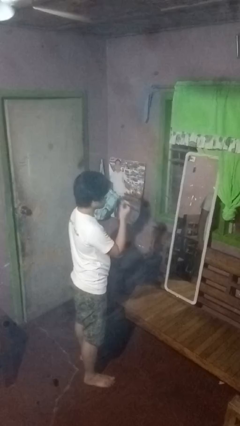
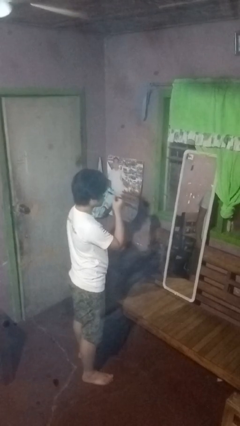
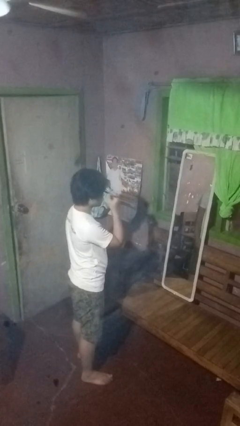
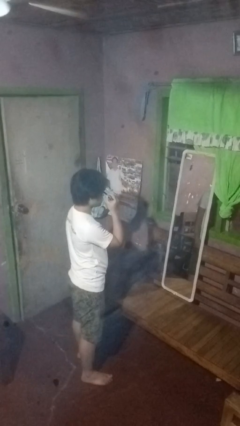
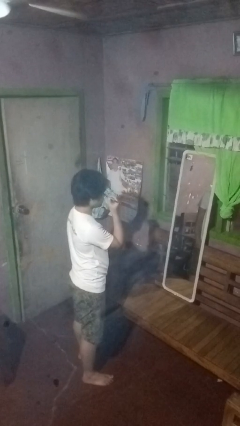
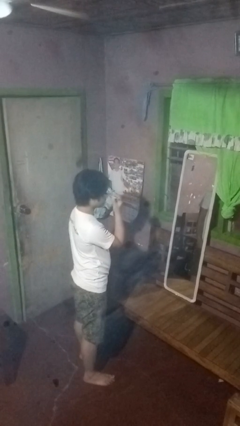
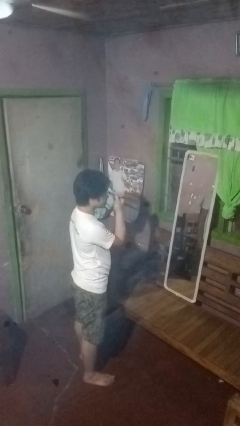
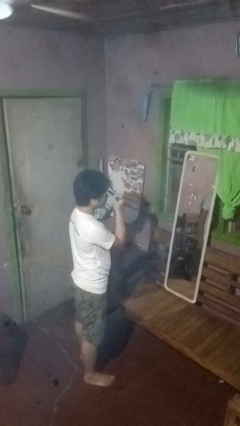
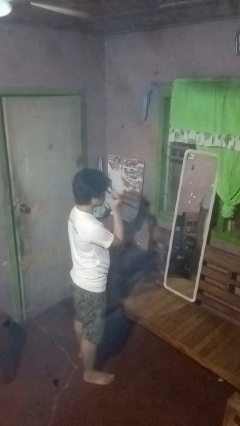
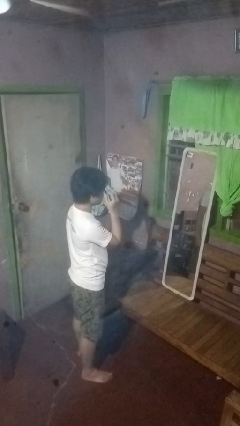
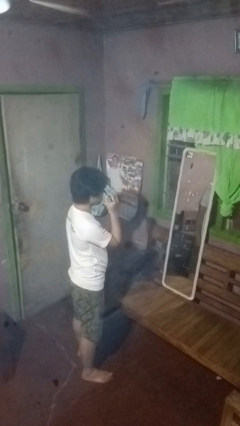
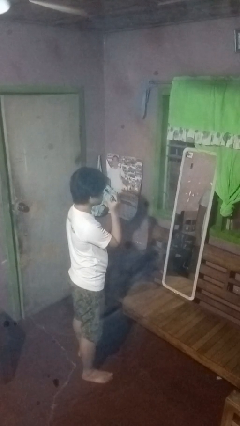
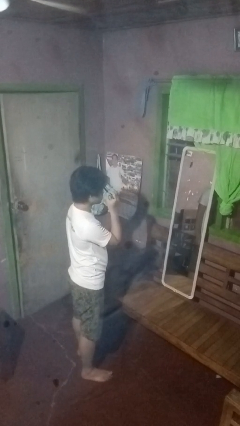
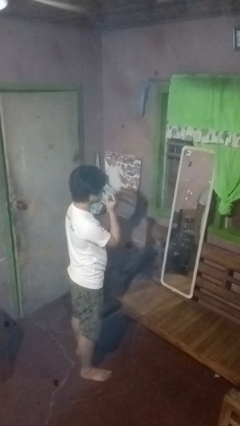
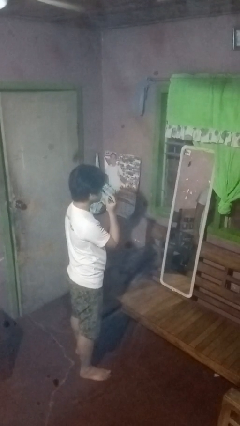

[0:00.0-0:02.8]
person applies eye makeup

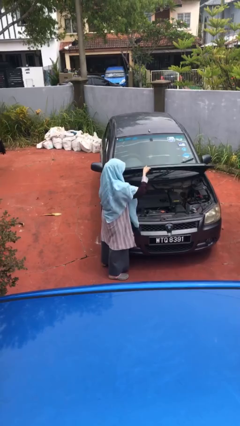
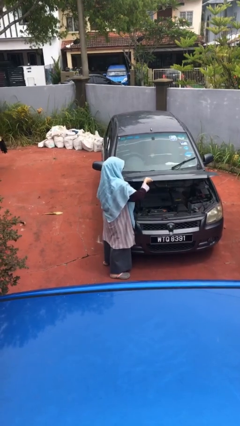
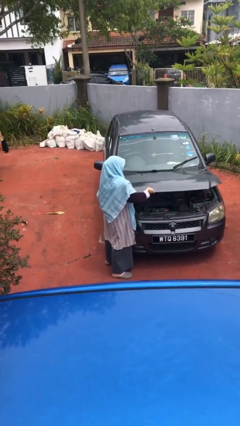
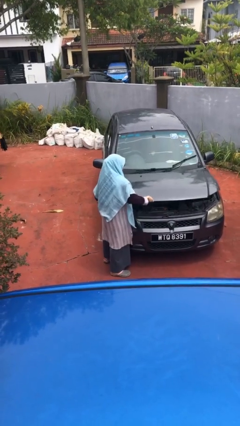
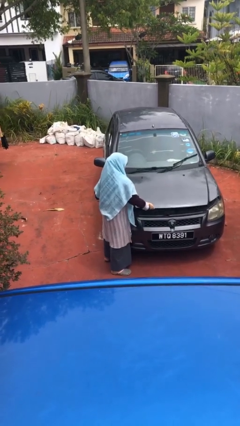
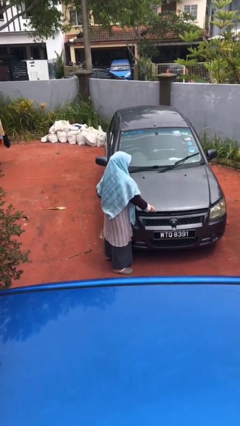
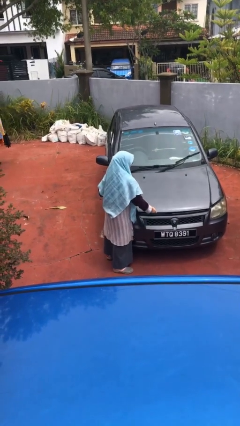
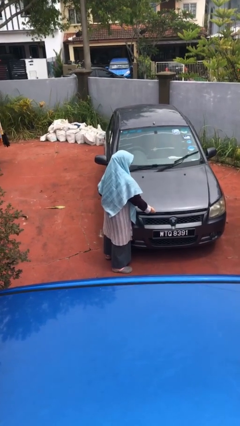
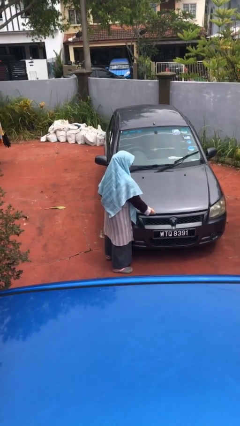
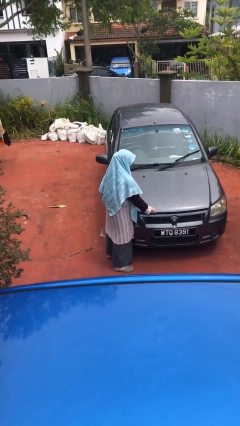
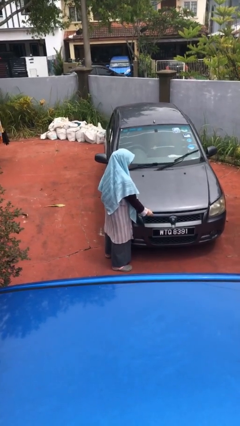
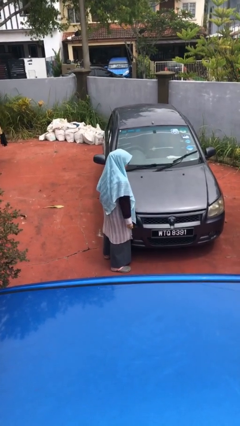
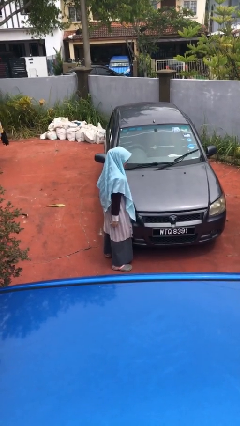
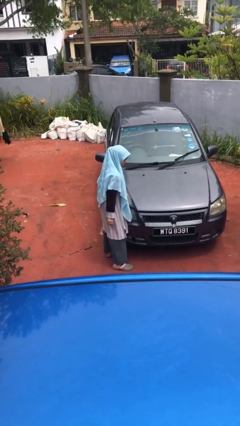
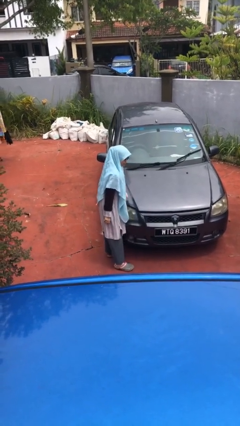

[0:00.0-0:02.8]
person closes car hood

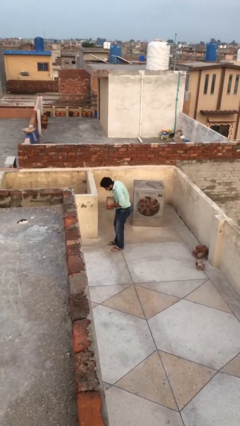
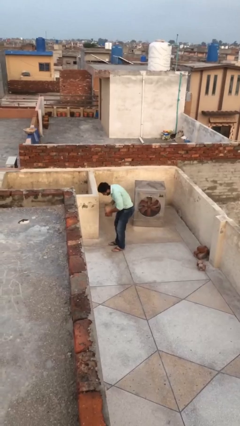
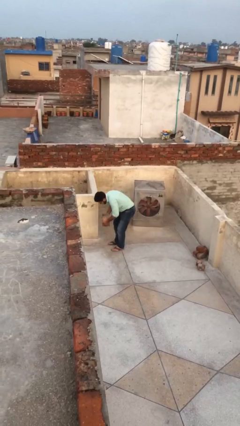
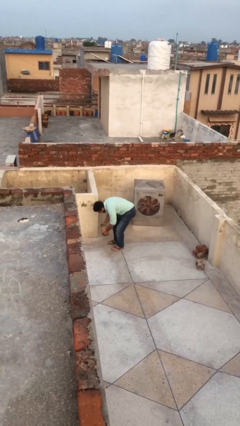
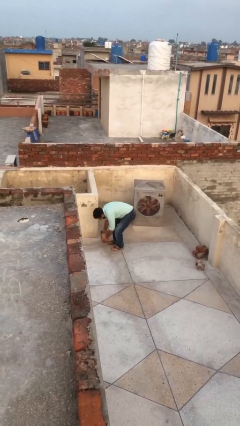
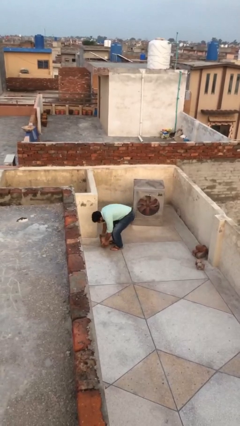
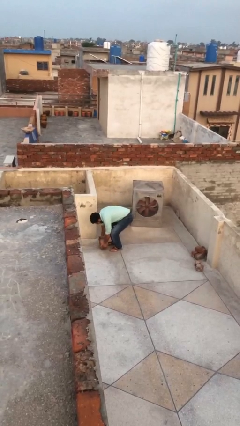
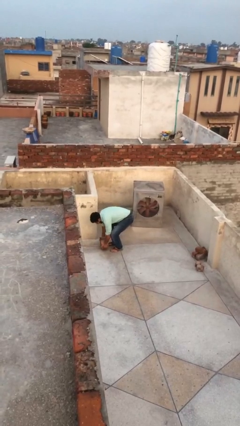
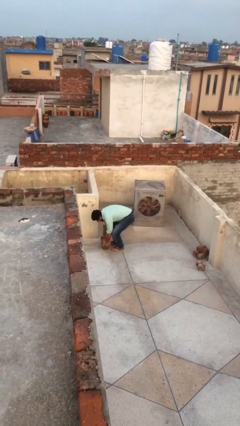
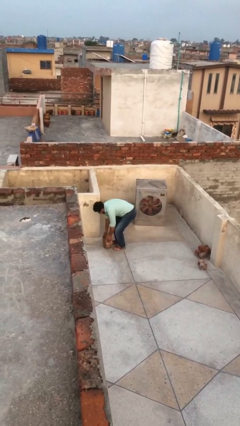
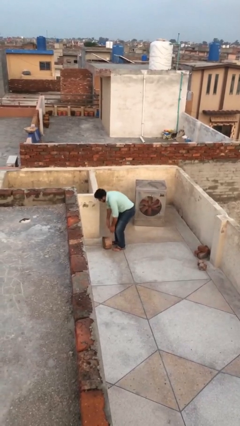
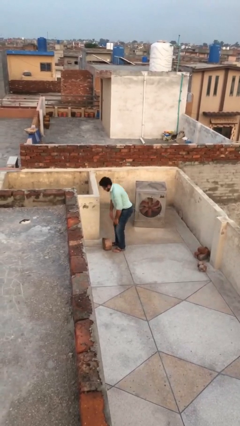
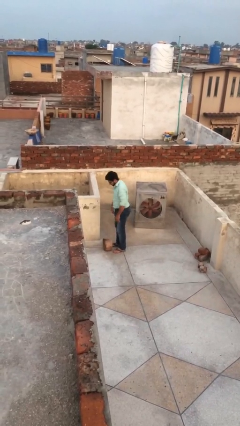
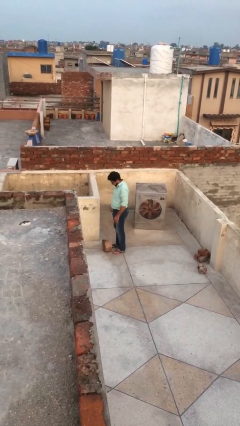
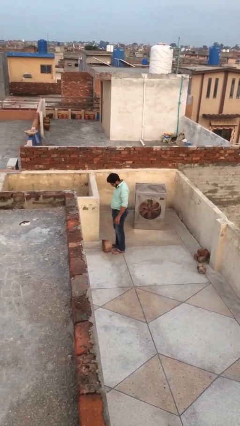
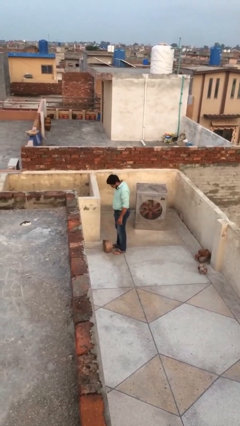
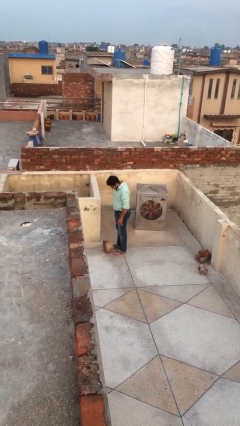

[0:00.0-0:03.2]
person puts down object on floor

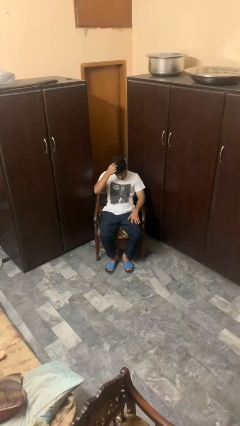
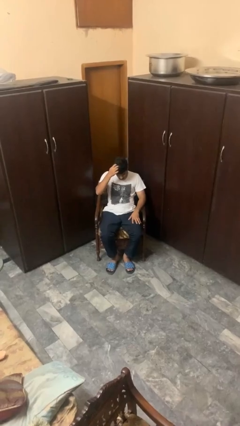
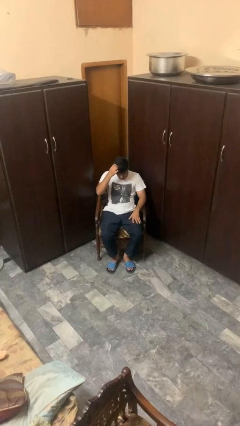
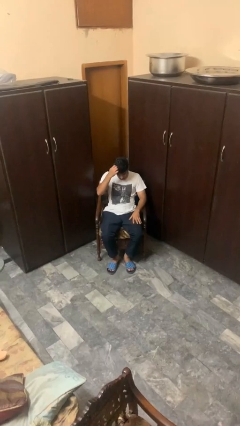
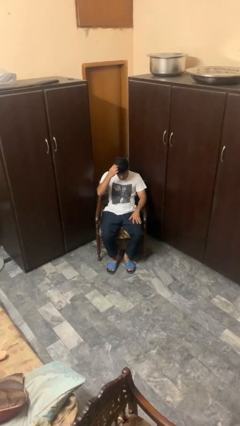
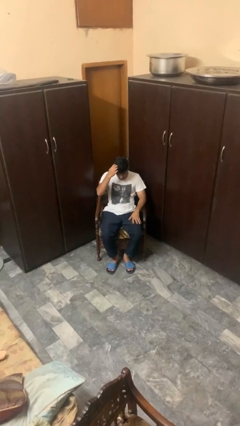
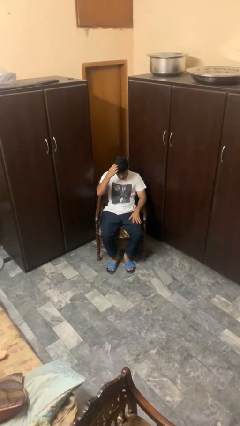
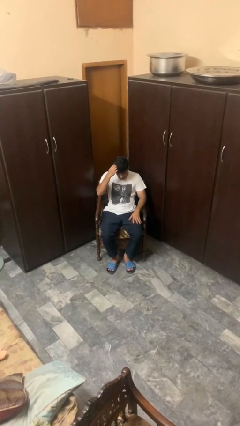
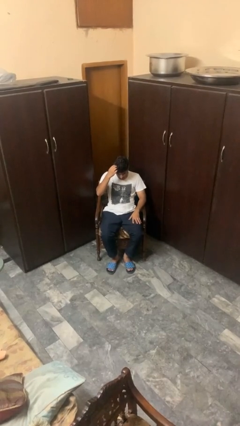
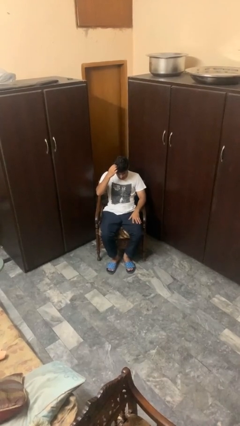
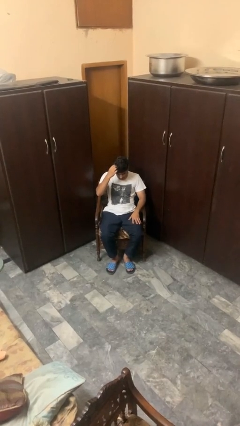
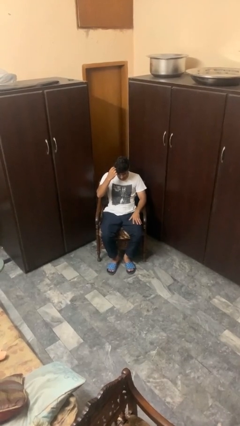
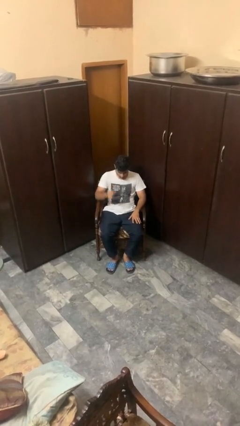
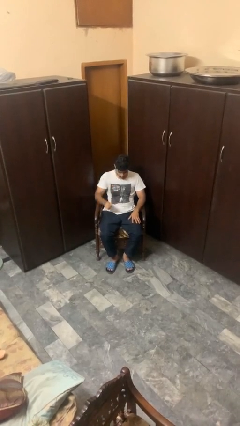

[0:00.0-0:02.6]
person scratches face

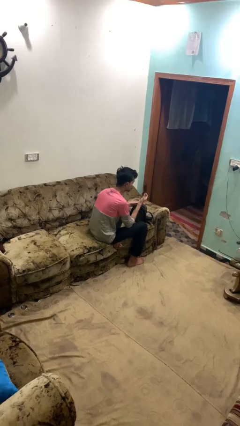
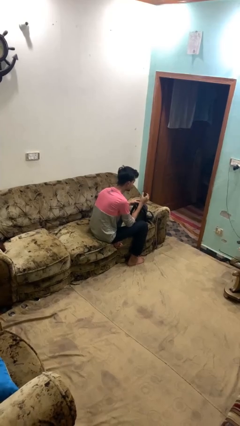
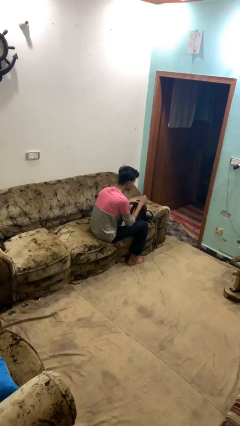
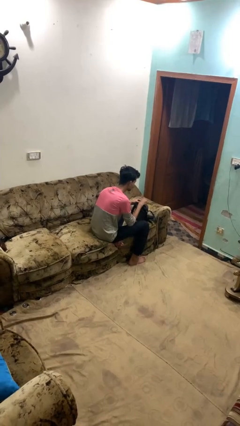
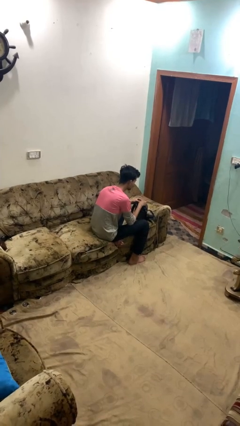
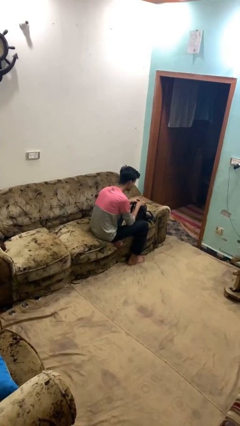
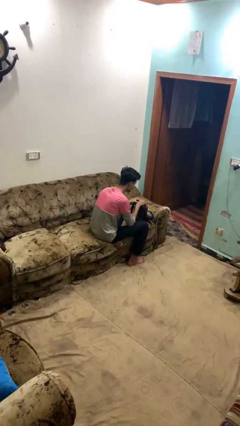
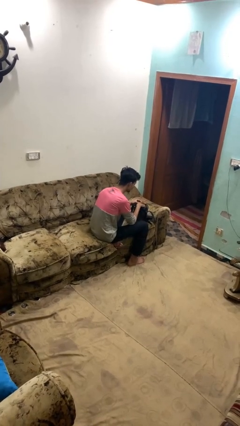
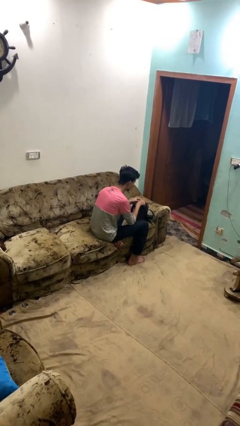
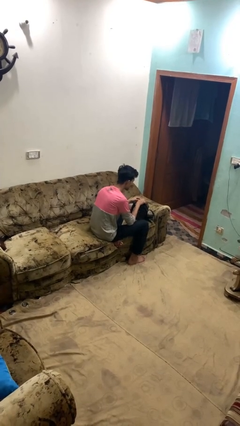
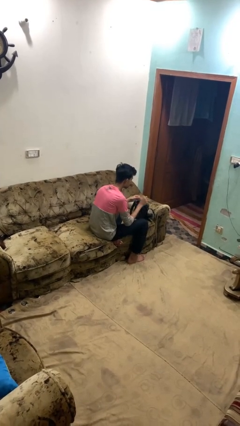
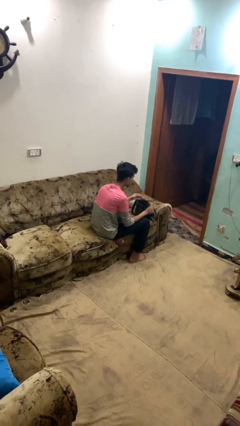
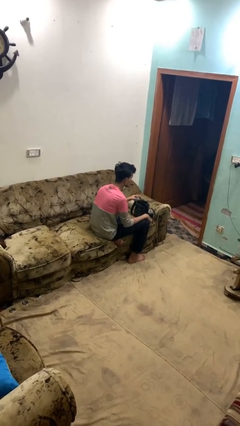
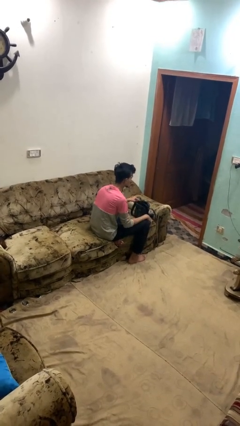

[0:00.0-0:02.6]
person puts object into backpack

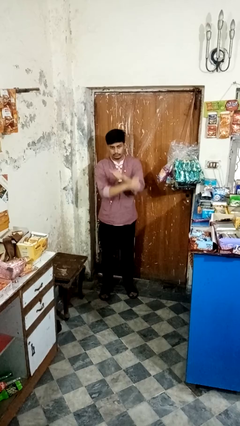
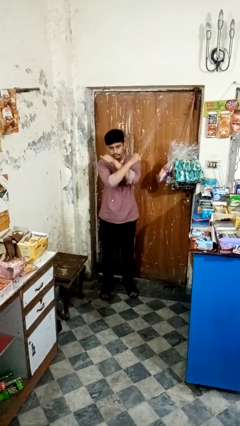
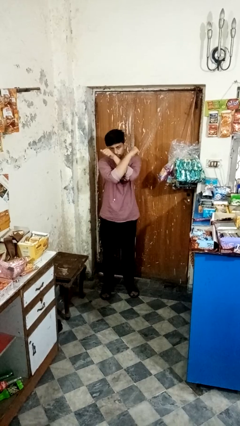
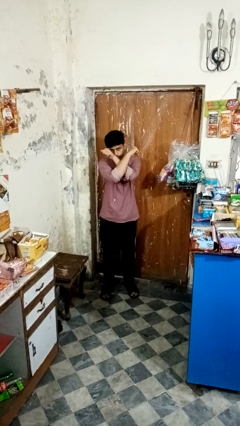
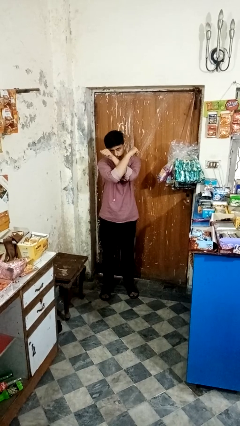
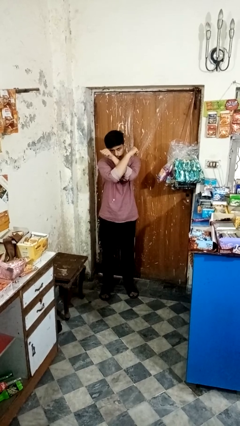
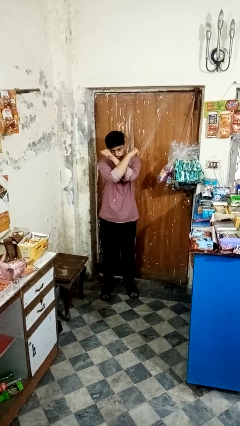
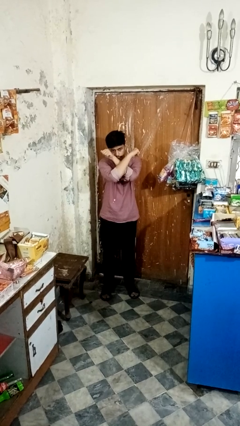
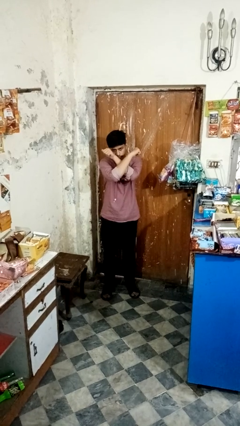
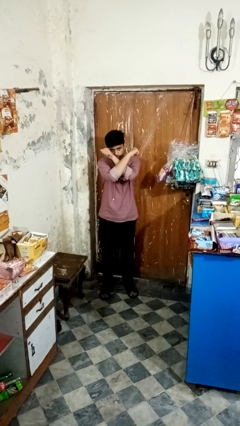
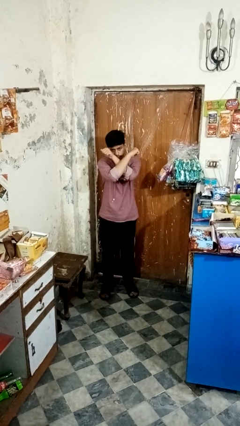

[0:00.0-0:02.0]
person gestures arms x

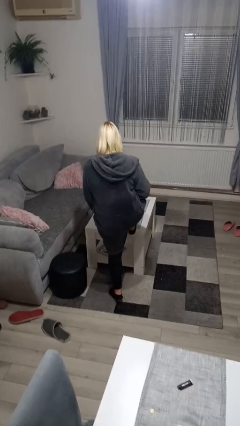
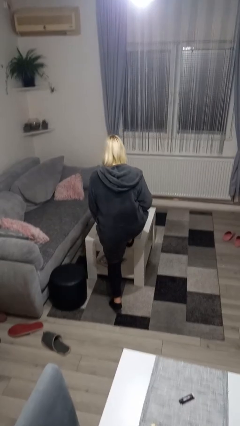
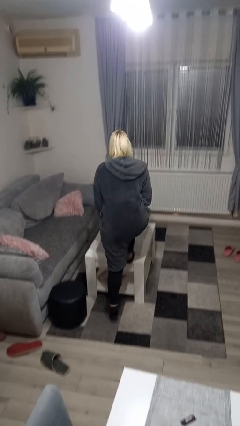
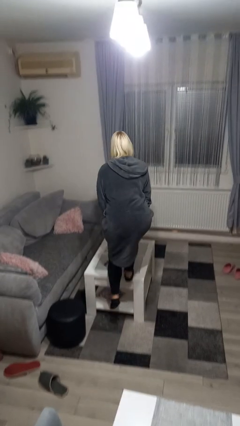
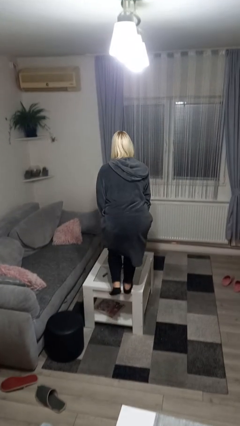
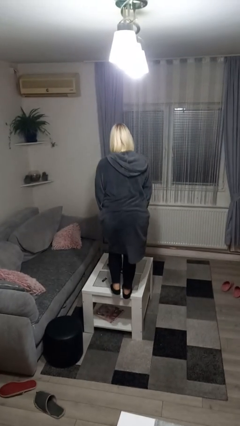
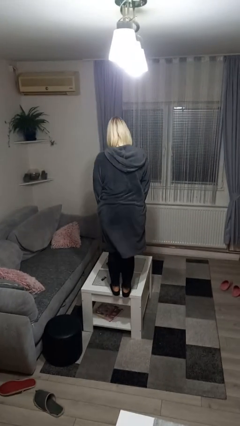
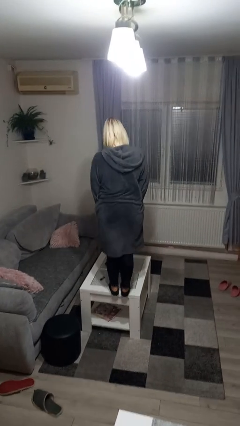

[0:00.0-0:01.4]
person climbs on table
